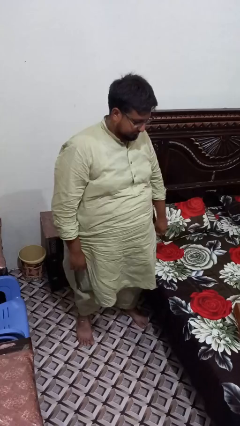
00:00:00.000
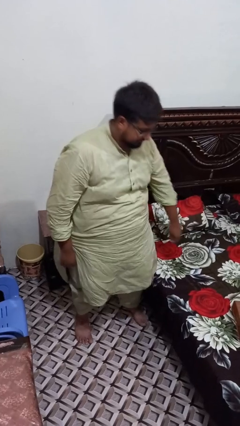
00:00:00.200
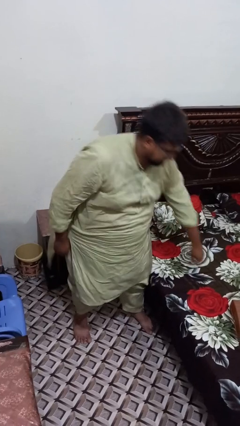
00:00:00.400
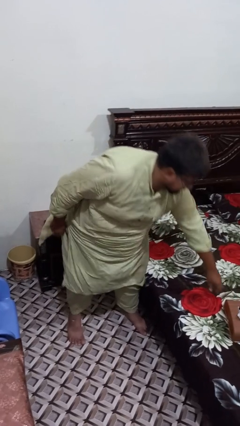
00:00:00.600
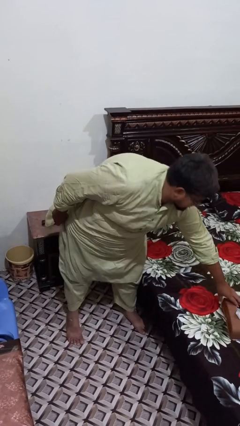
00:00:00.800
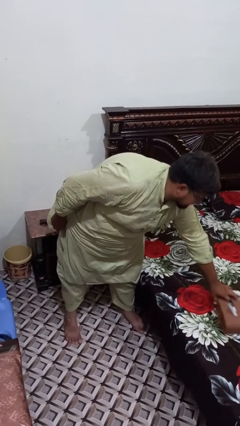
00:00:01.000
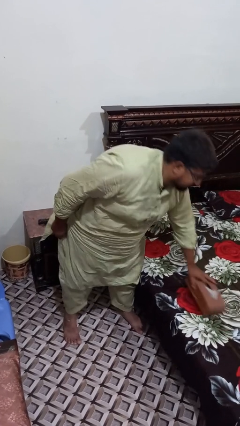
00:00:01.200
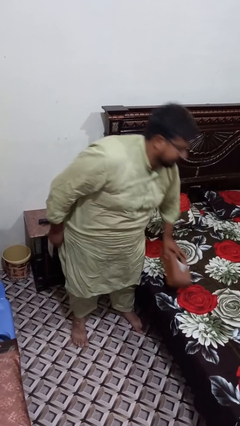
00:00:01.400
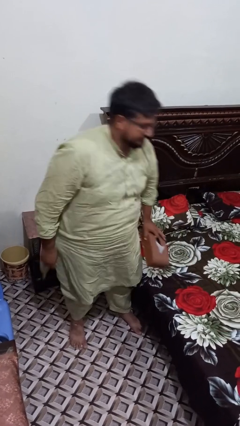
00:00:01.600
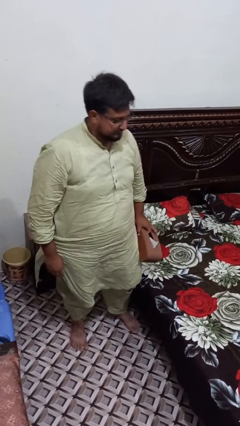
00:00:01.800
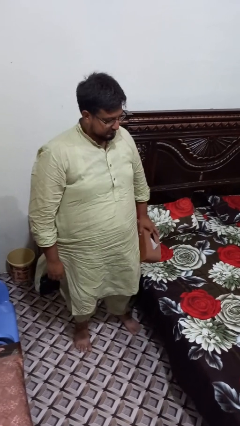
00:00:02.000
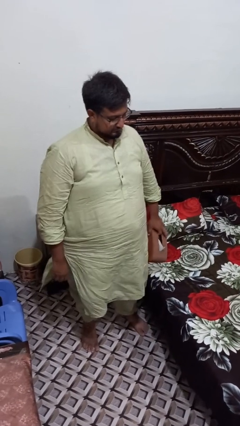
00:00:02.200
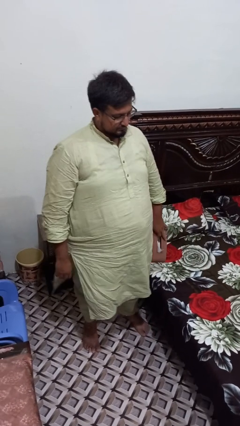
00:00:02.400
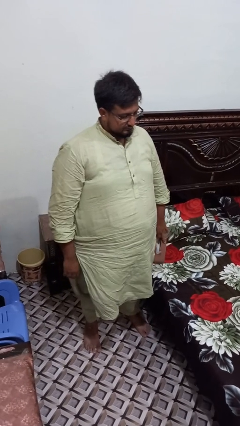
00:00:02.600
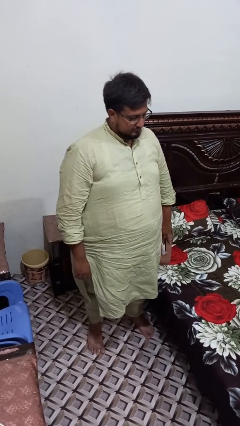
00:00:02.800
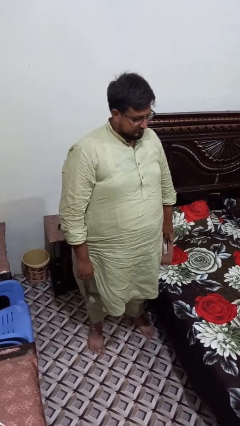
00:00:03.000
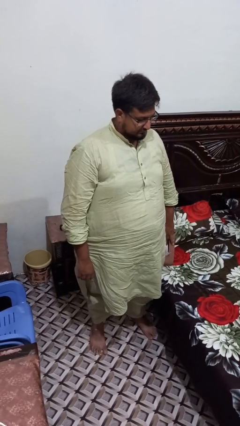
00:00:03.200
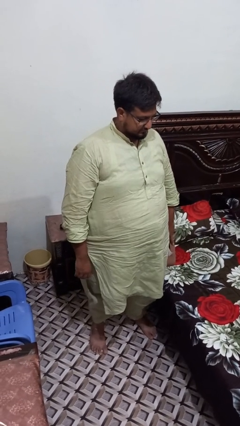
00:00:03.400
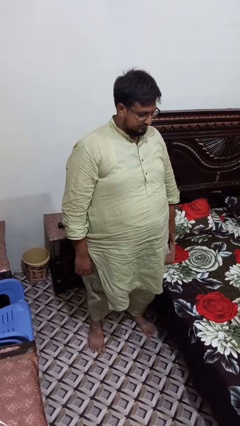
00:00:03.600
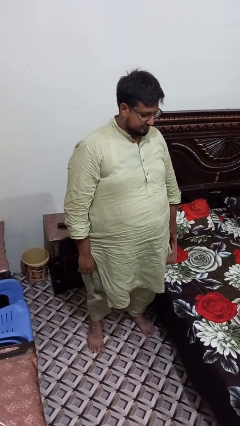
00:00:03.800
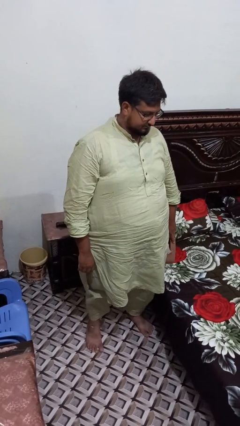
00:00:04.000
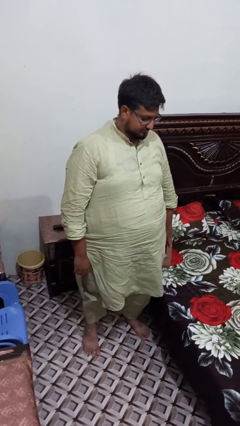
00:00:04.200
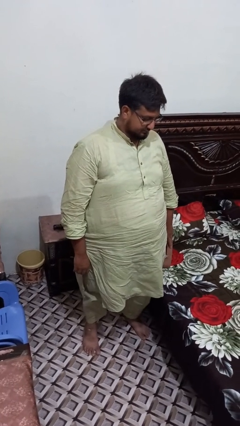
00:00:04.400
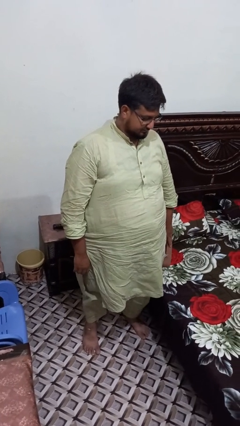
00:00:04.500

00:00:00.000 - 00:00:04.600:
person picks up object from bed

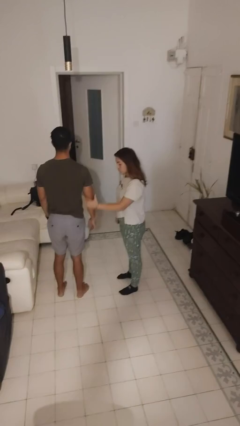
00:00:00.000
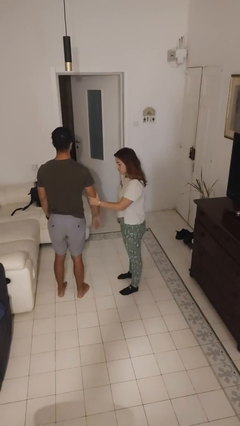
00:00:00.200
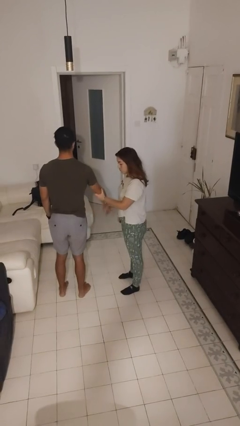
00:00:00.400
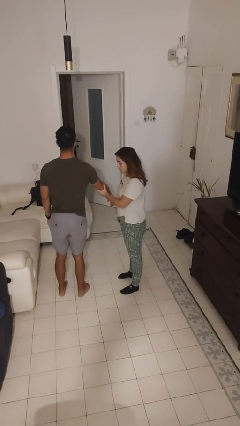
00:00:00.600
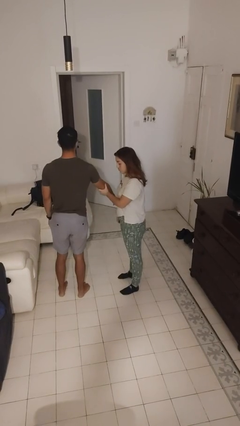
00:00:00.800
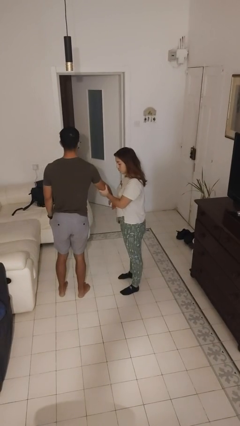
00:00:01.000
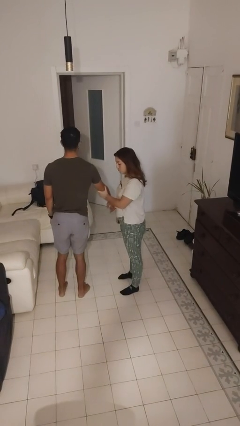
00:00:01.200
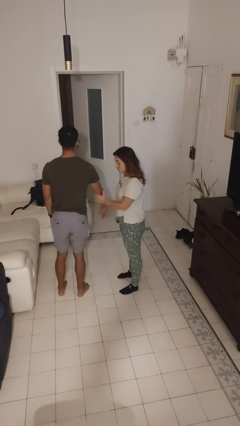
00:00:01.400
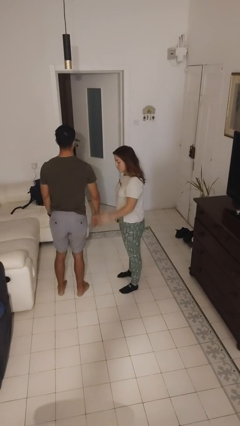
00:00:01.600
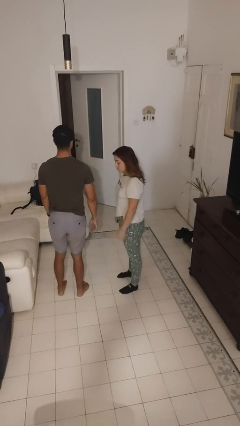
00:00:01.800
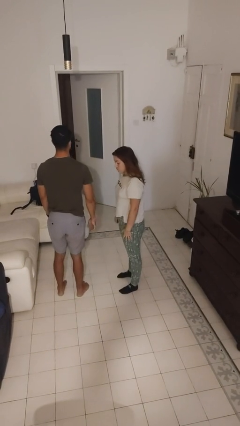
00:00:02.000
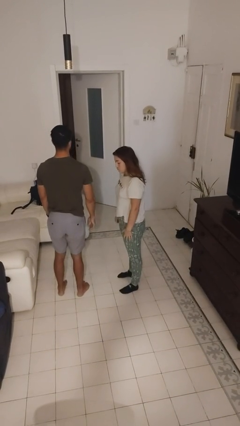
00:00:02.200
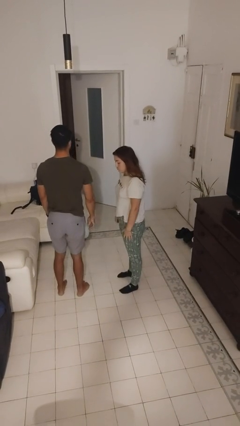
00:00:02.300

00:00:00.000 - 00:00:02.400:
person grabs person by forearm

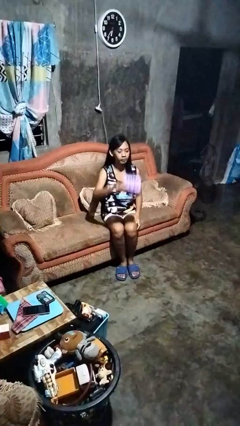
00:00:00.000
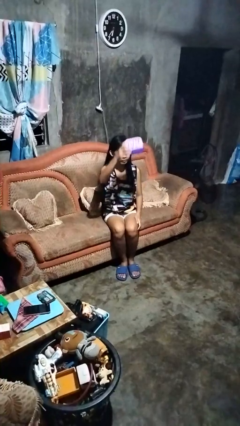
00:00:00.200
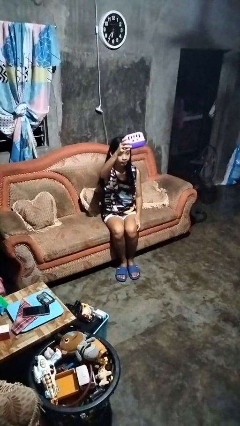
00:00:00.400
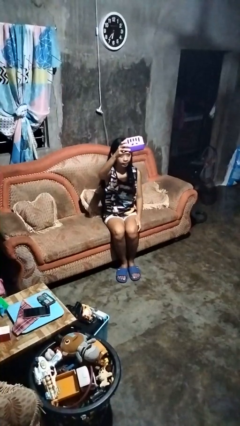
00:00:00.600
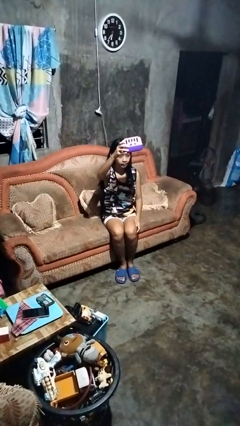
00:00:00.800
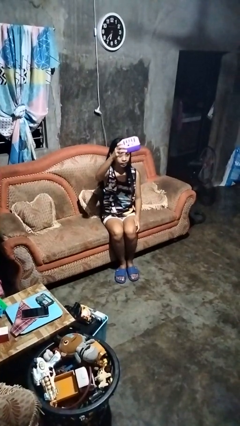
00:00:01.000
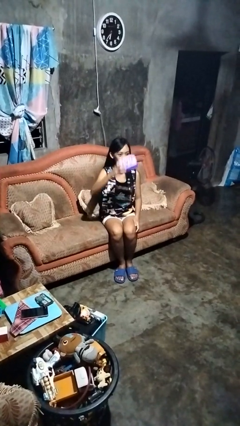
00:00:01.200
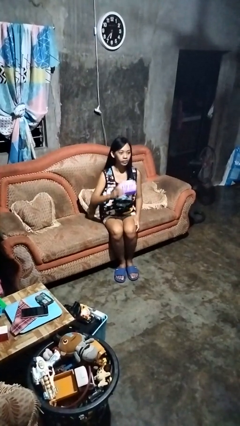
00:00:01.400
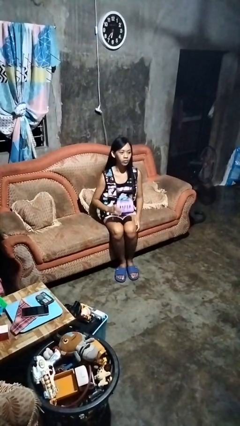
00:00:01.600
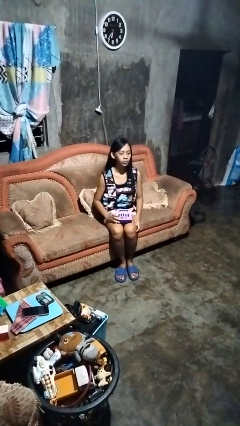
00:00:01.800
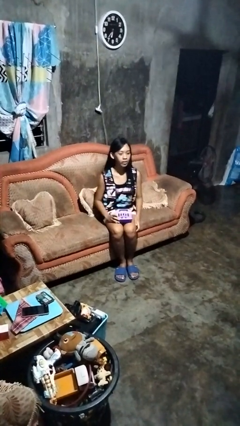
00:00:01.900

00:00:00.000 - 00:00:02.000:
person holds object above head

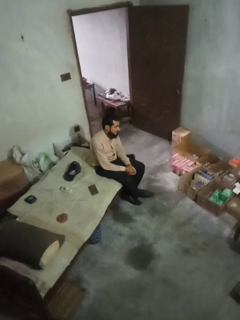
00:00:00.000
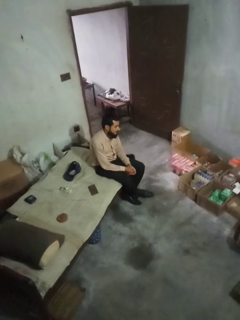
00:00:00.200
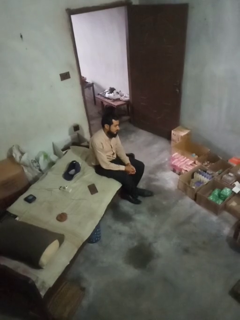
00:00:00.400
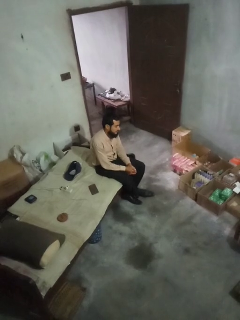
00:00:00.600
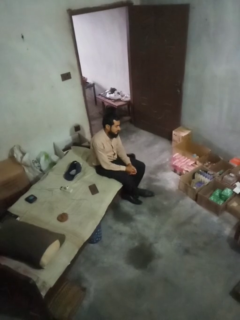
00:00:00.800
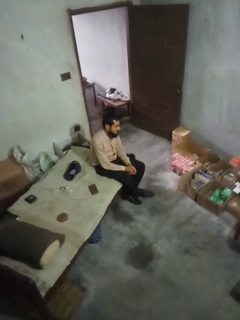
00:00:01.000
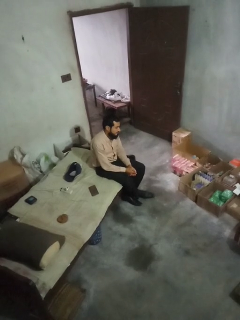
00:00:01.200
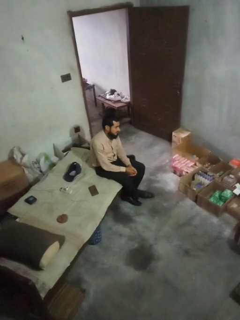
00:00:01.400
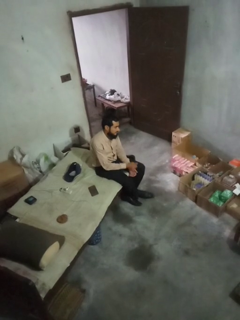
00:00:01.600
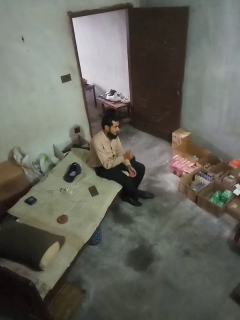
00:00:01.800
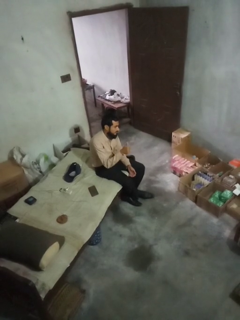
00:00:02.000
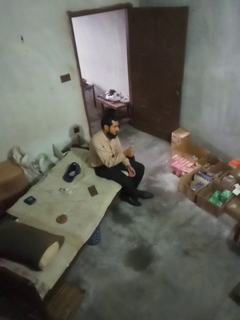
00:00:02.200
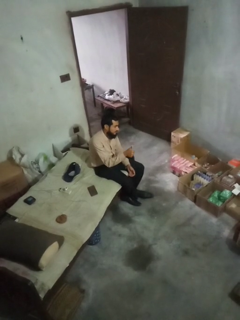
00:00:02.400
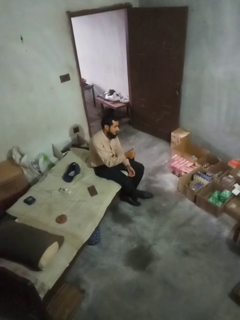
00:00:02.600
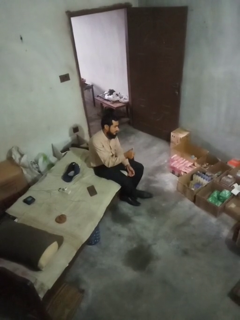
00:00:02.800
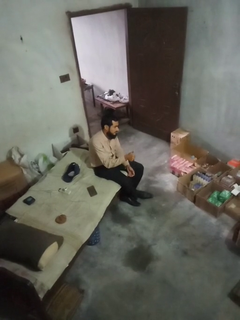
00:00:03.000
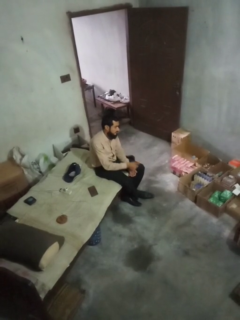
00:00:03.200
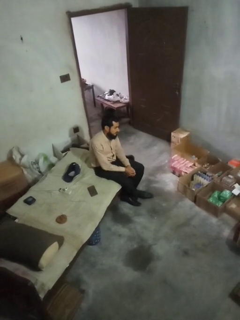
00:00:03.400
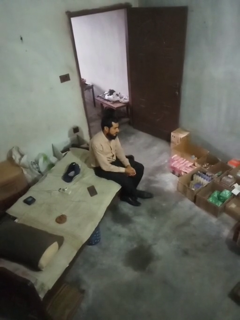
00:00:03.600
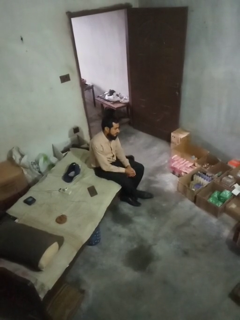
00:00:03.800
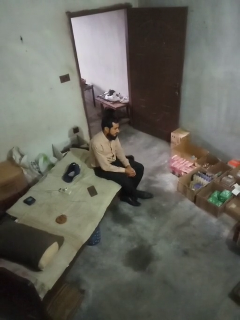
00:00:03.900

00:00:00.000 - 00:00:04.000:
person gestures thumbs up

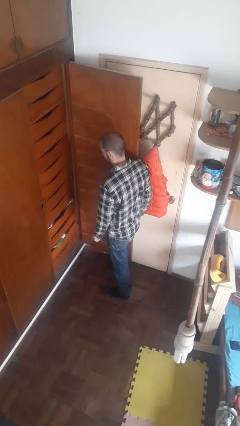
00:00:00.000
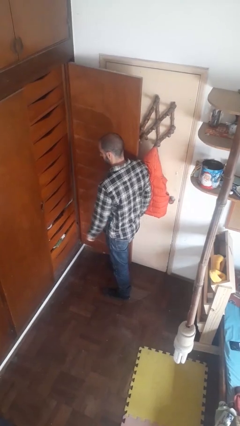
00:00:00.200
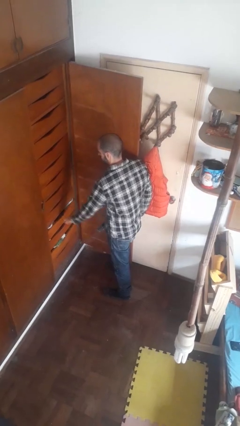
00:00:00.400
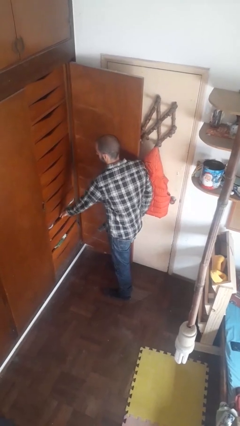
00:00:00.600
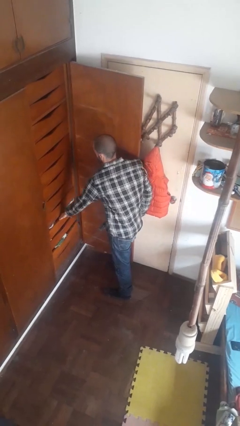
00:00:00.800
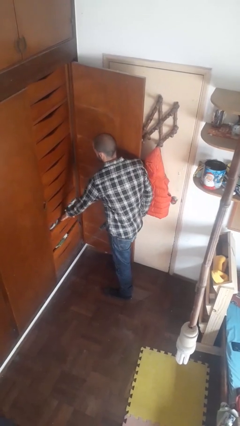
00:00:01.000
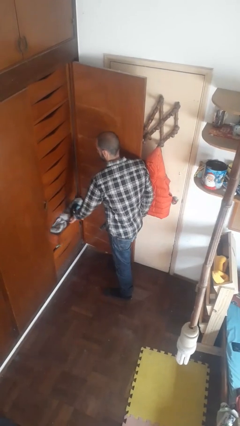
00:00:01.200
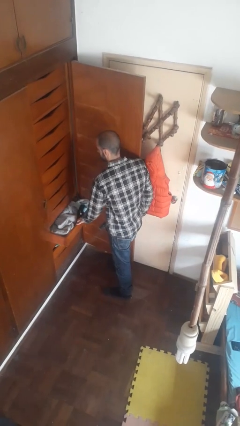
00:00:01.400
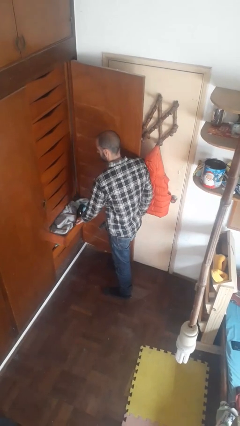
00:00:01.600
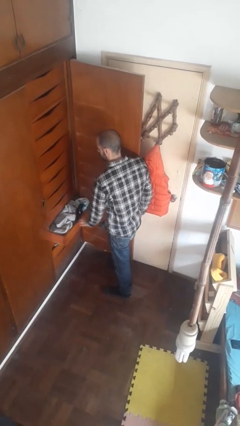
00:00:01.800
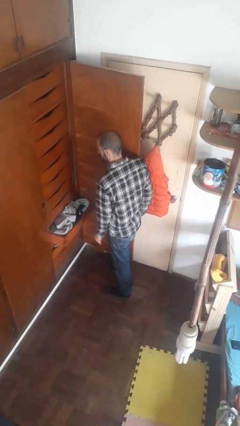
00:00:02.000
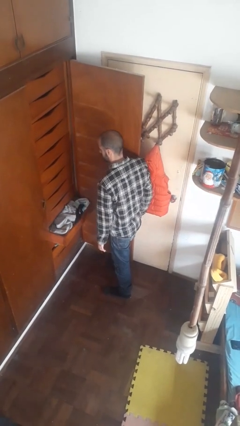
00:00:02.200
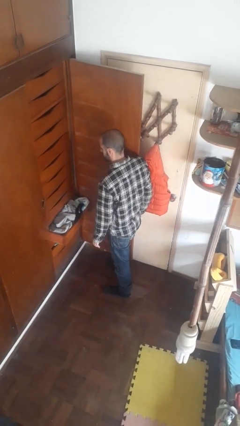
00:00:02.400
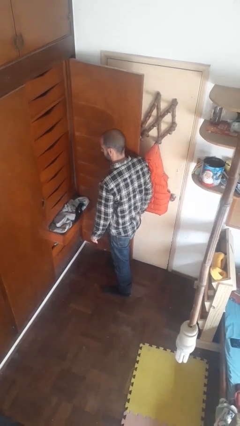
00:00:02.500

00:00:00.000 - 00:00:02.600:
person opens dresser drawer

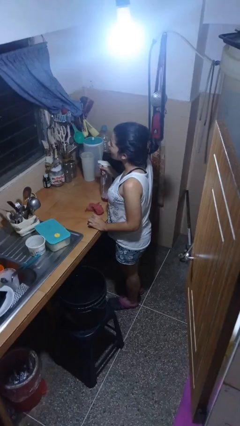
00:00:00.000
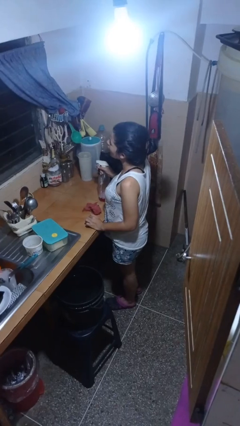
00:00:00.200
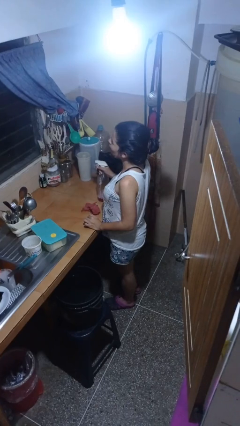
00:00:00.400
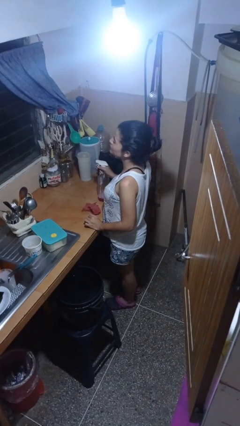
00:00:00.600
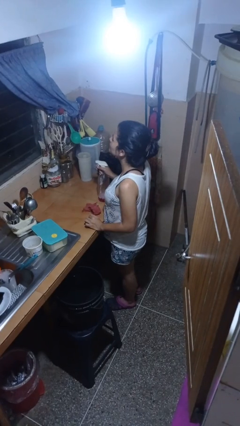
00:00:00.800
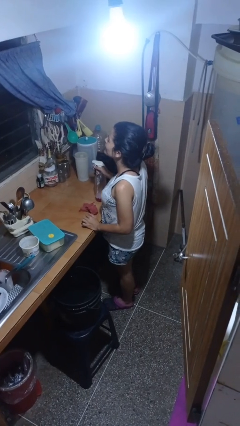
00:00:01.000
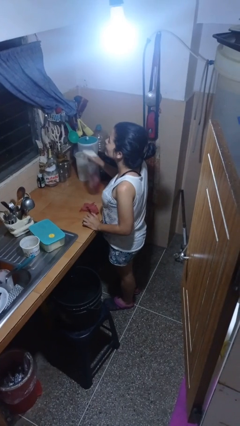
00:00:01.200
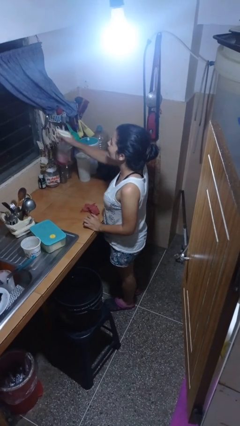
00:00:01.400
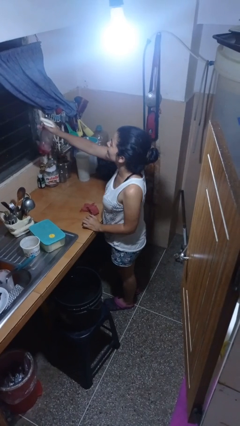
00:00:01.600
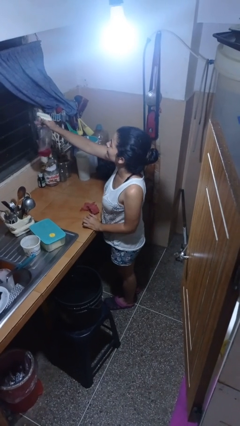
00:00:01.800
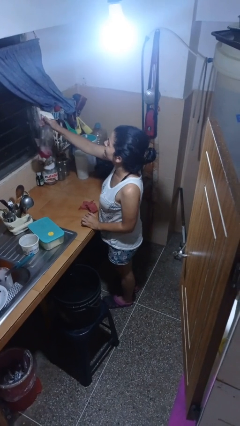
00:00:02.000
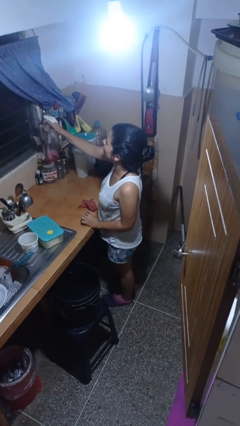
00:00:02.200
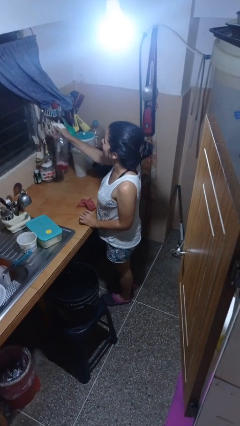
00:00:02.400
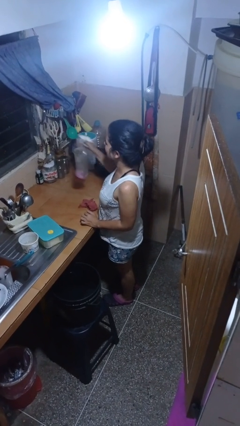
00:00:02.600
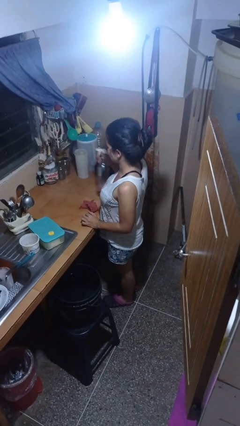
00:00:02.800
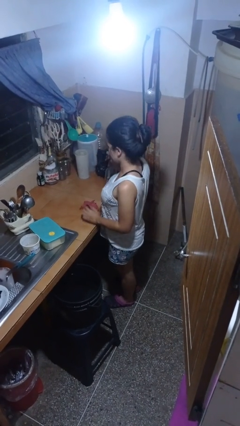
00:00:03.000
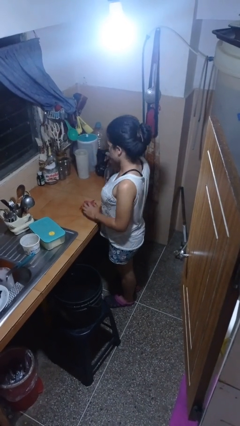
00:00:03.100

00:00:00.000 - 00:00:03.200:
person sprays from bottle
